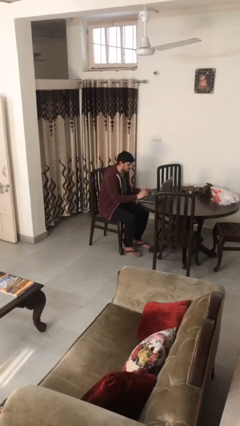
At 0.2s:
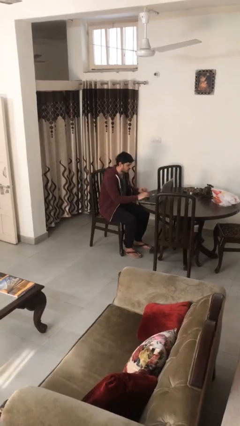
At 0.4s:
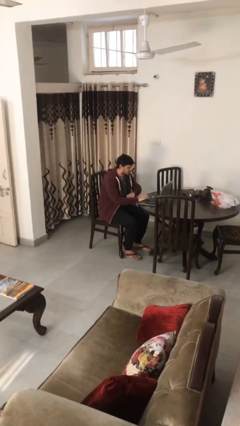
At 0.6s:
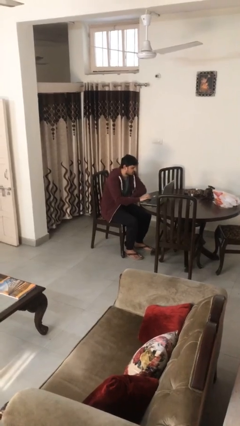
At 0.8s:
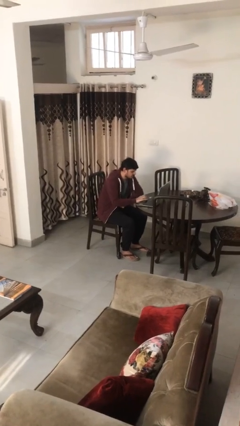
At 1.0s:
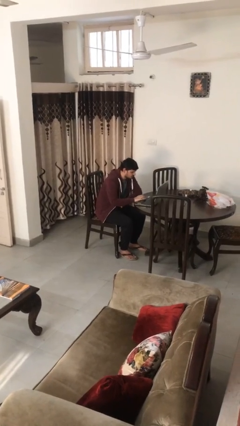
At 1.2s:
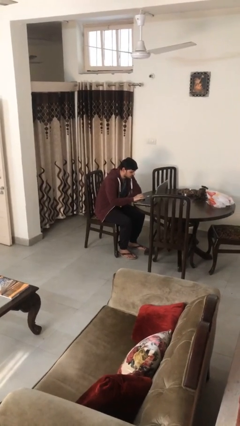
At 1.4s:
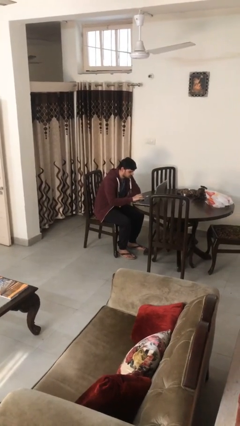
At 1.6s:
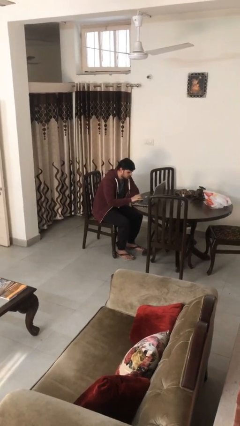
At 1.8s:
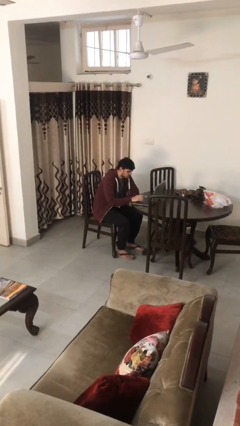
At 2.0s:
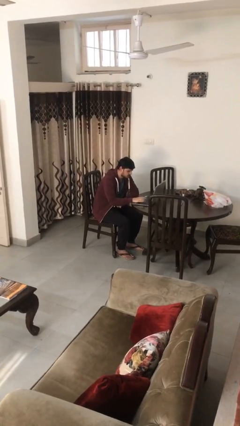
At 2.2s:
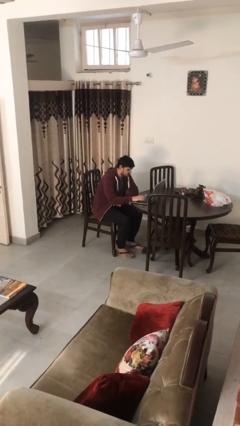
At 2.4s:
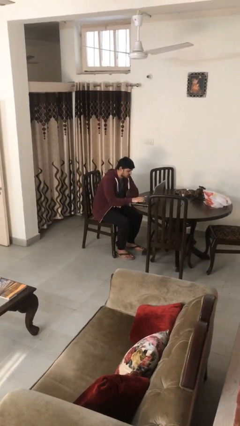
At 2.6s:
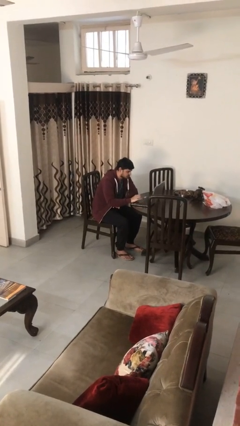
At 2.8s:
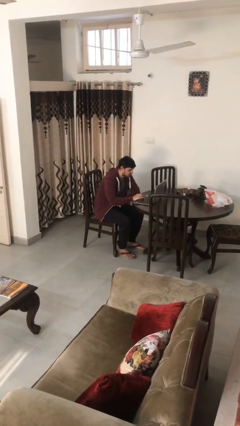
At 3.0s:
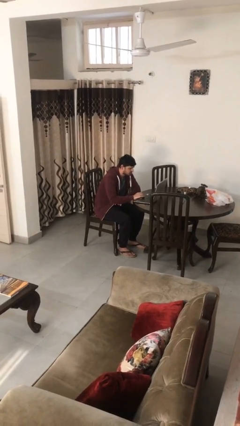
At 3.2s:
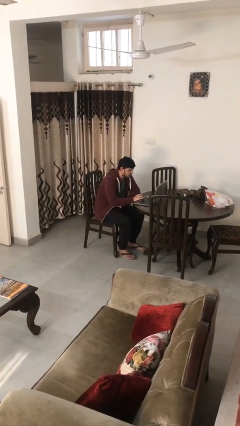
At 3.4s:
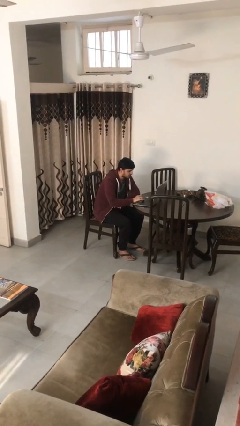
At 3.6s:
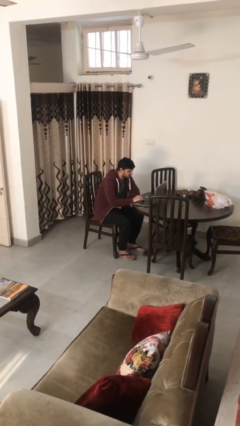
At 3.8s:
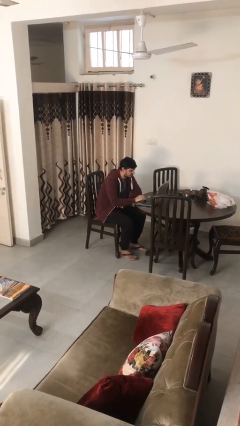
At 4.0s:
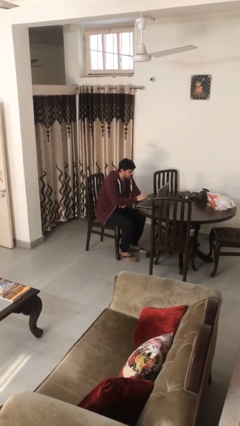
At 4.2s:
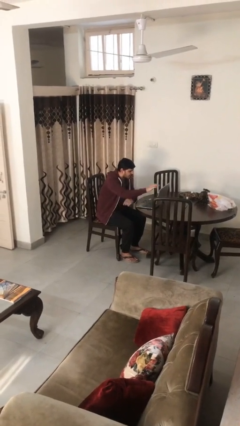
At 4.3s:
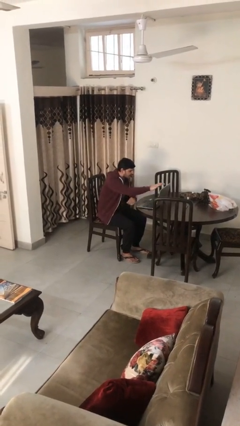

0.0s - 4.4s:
person interacts with laptop

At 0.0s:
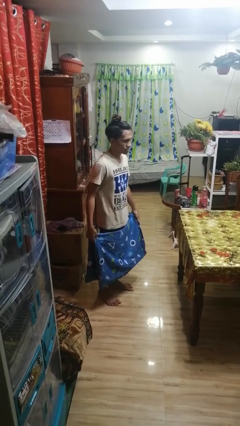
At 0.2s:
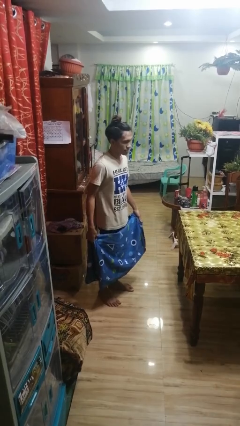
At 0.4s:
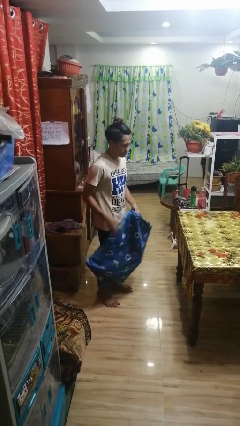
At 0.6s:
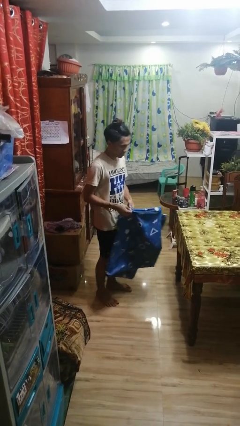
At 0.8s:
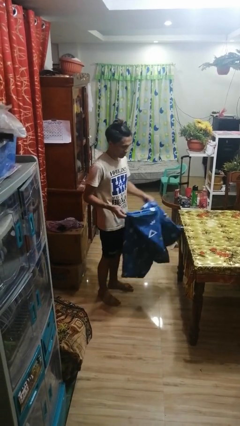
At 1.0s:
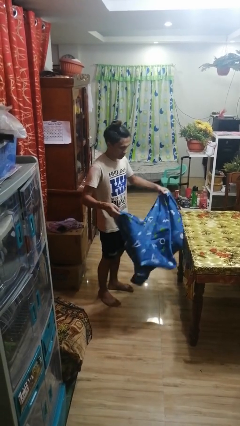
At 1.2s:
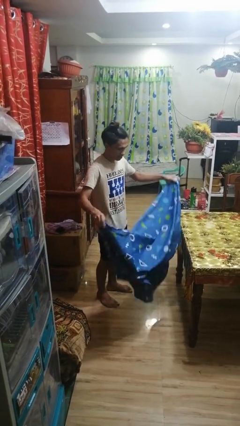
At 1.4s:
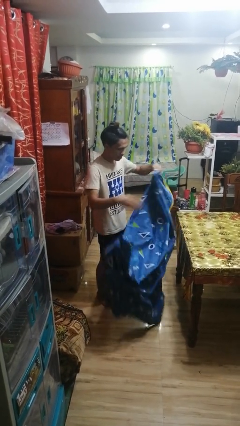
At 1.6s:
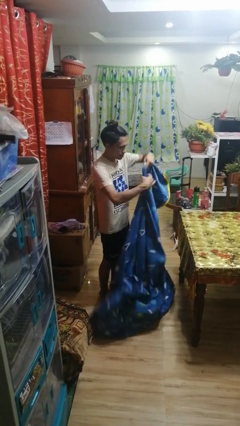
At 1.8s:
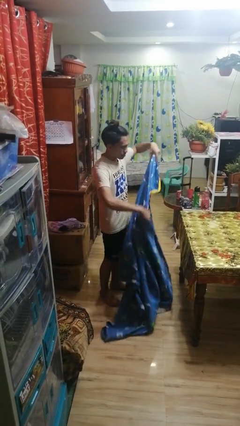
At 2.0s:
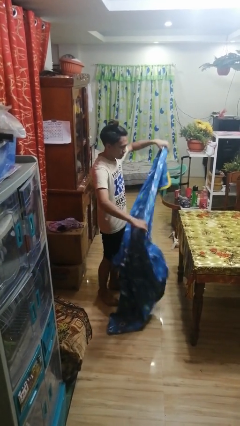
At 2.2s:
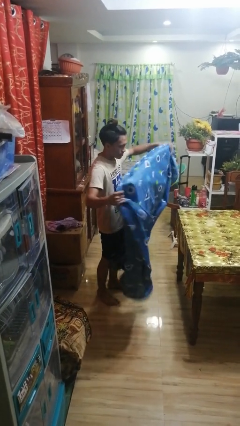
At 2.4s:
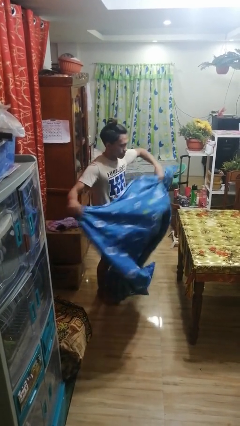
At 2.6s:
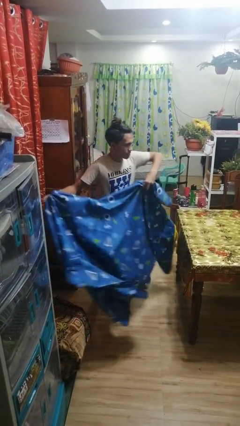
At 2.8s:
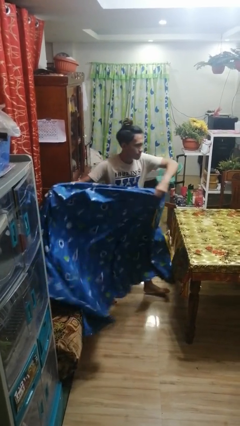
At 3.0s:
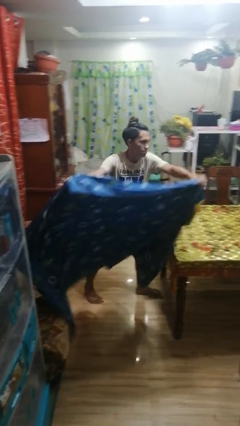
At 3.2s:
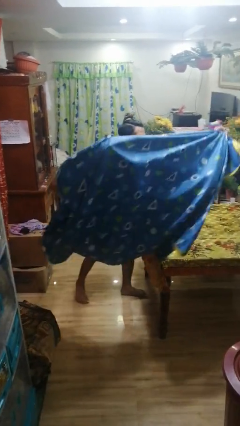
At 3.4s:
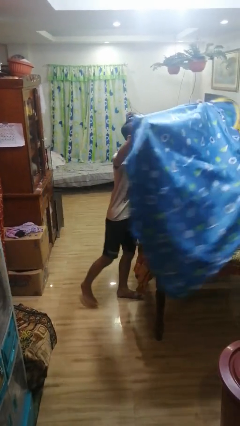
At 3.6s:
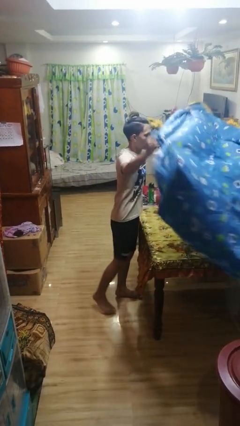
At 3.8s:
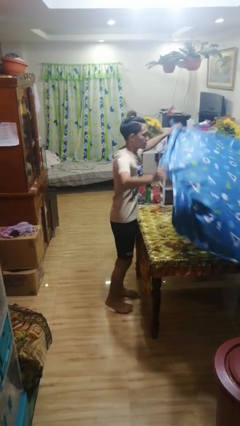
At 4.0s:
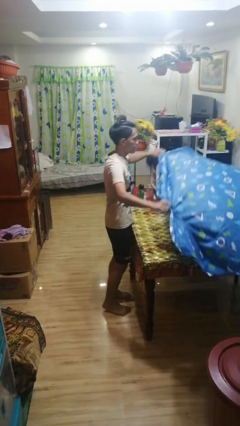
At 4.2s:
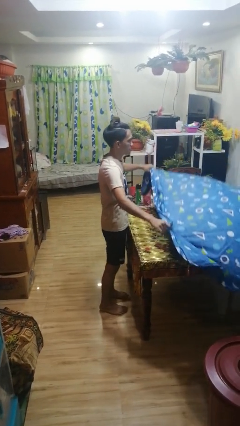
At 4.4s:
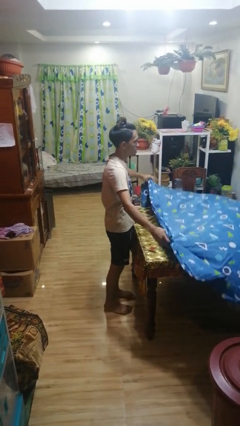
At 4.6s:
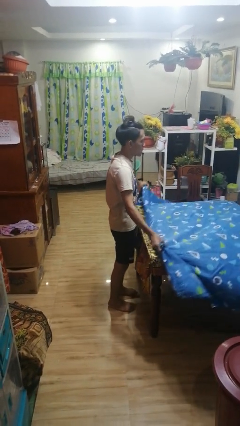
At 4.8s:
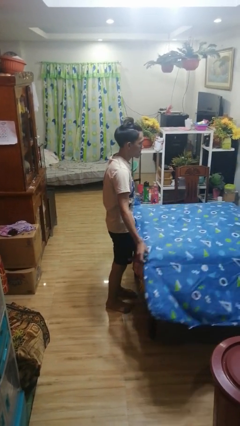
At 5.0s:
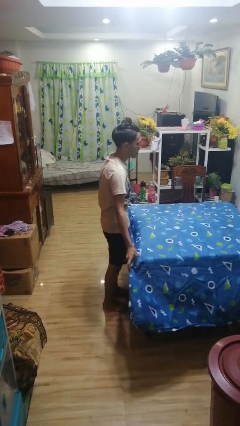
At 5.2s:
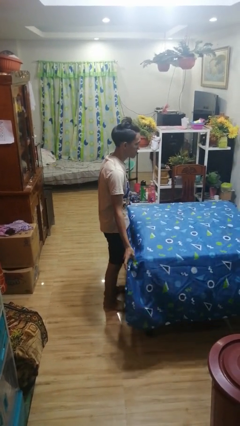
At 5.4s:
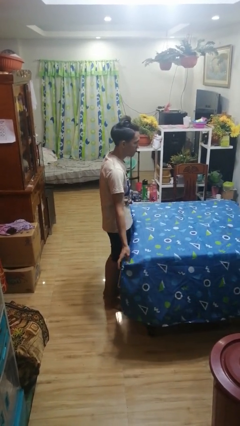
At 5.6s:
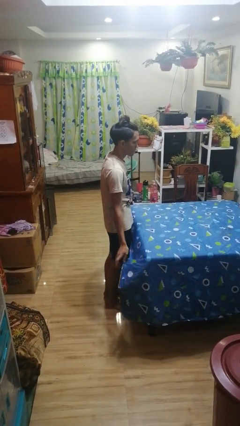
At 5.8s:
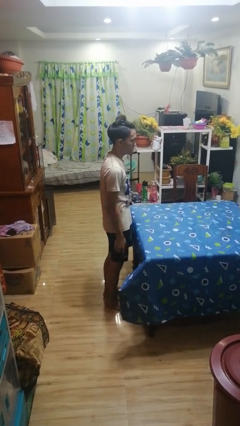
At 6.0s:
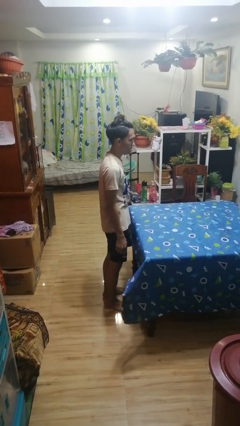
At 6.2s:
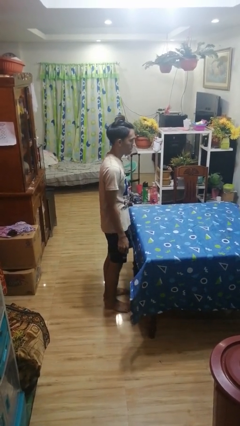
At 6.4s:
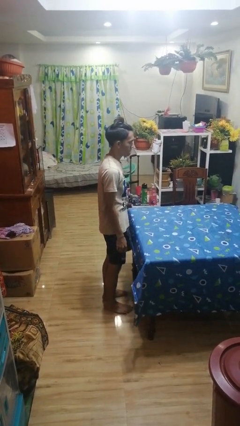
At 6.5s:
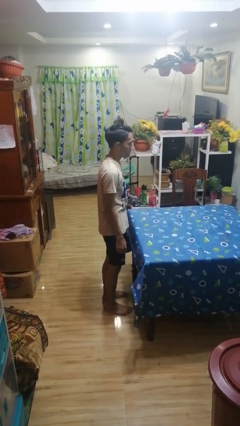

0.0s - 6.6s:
person spreads tablecloth

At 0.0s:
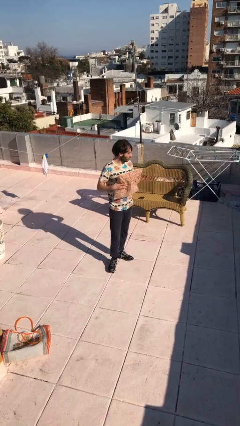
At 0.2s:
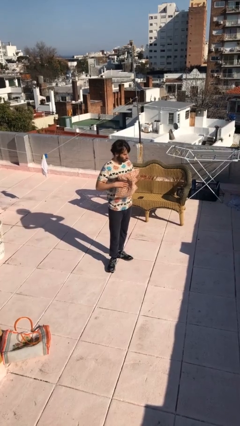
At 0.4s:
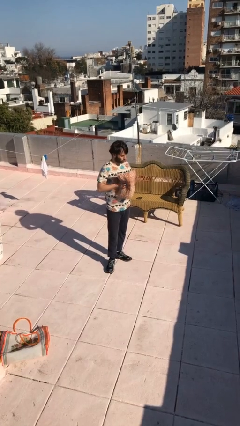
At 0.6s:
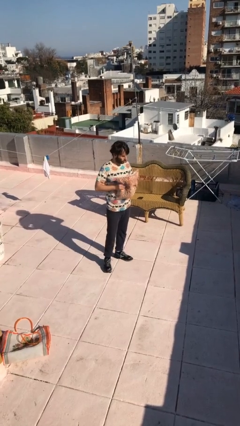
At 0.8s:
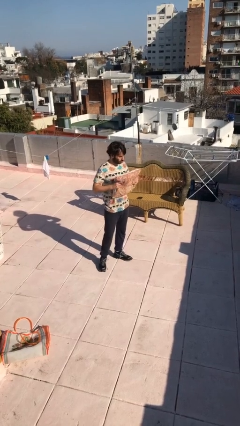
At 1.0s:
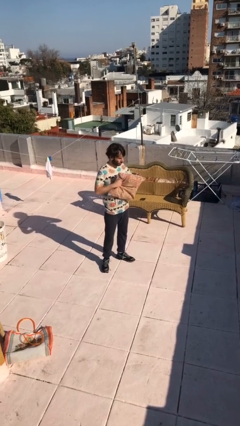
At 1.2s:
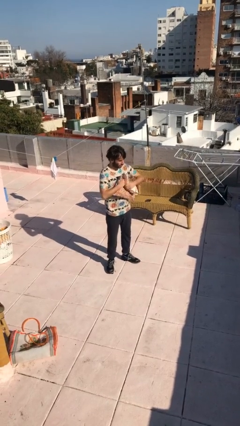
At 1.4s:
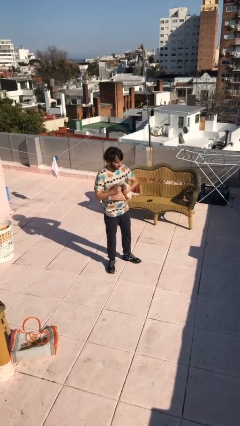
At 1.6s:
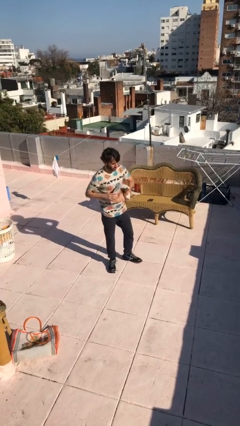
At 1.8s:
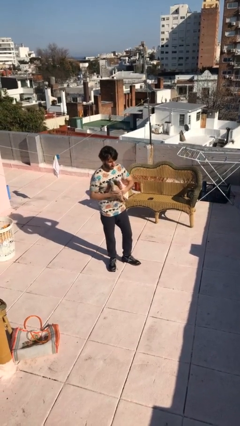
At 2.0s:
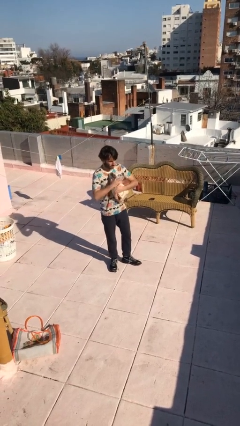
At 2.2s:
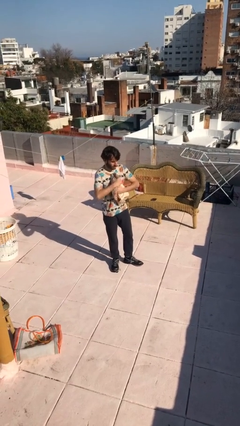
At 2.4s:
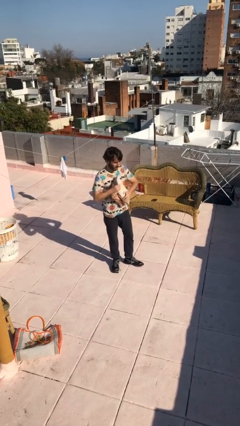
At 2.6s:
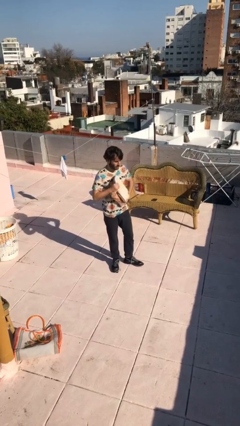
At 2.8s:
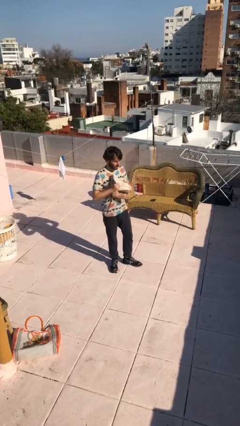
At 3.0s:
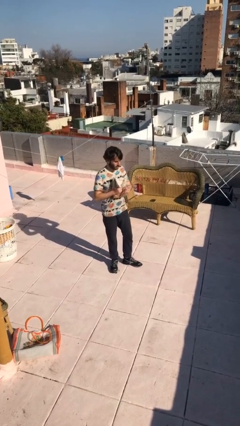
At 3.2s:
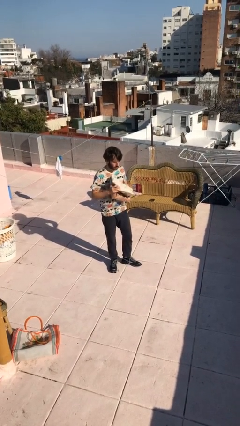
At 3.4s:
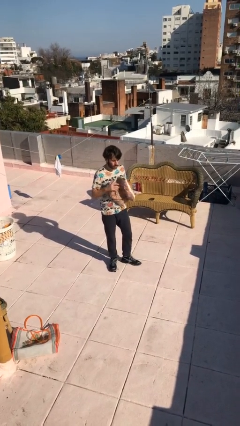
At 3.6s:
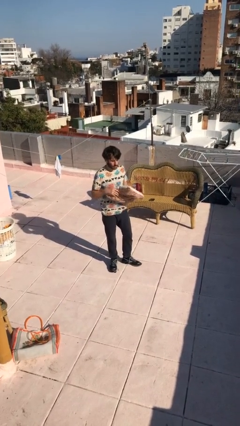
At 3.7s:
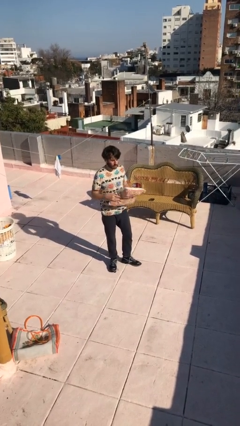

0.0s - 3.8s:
person squeezes object

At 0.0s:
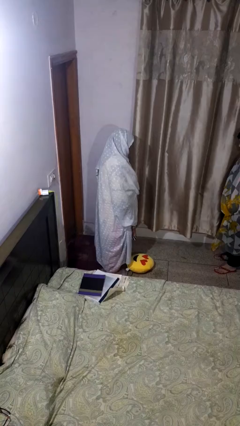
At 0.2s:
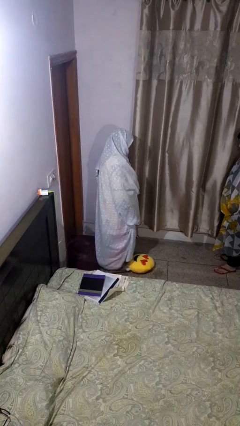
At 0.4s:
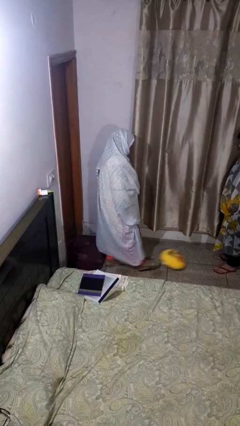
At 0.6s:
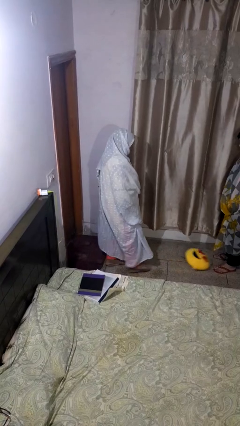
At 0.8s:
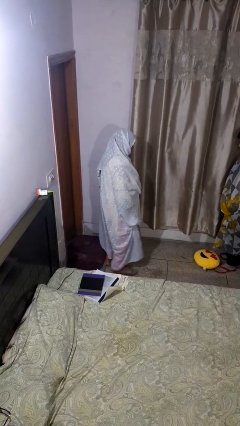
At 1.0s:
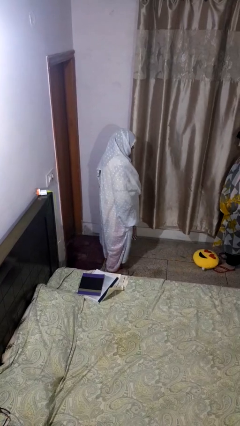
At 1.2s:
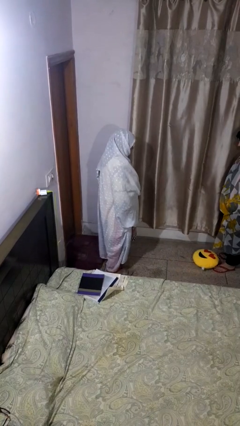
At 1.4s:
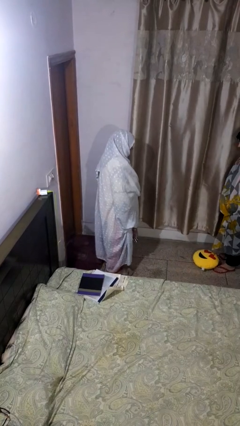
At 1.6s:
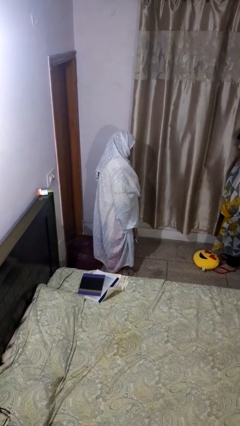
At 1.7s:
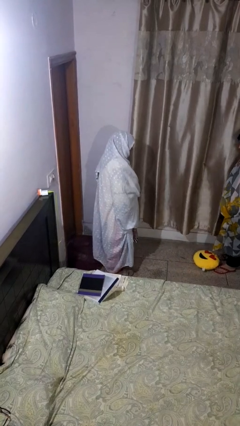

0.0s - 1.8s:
person kicks object to person

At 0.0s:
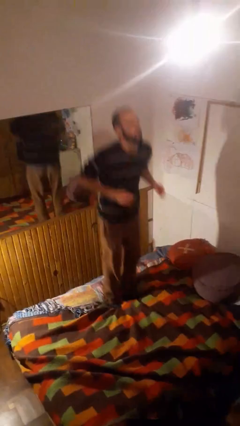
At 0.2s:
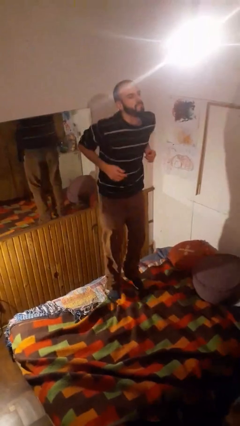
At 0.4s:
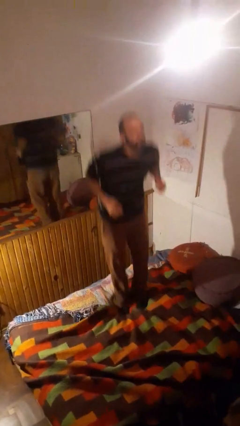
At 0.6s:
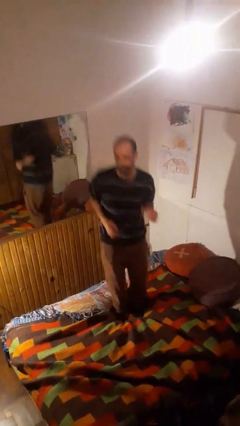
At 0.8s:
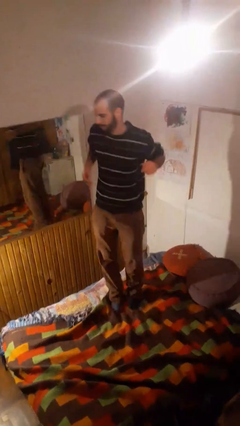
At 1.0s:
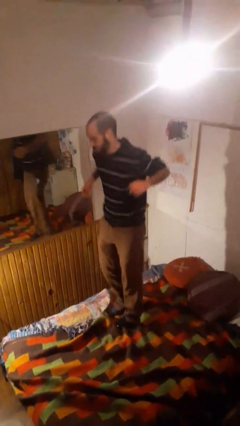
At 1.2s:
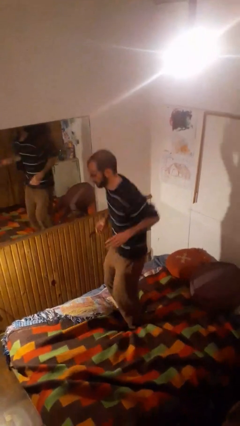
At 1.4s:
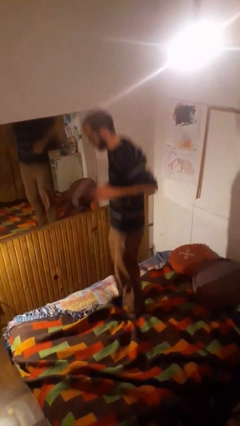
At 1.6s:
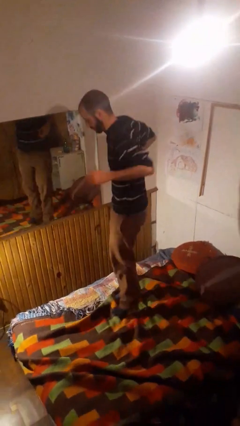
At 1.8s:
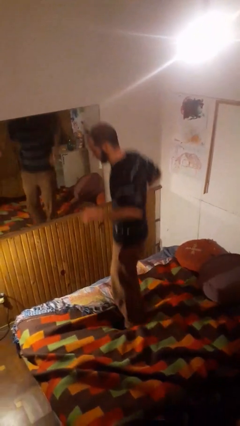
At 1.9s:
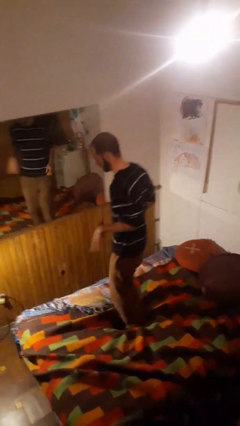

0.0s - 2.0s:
person jumps on bed
